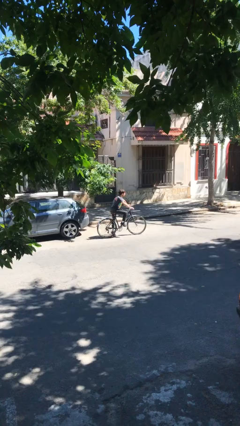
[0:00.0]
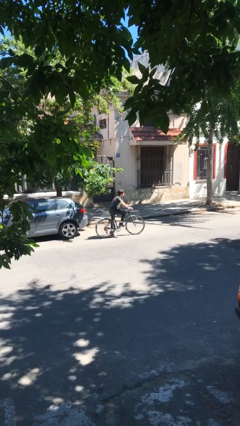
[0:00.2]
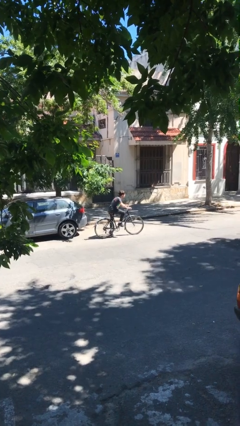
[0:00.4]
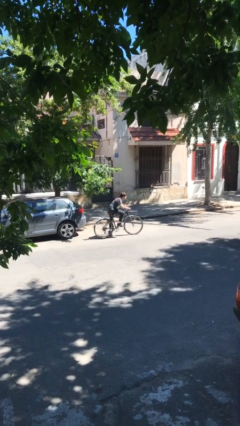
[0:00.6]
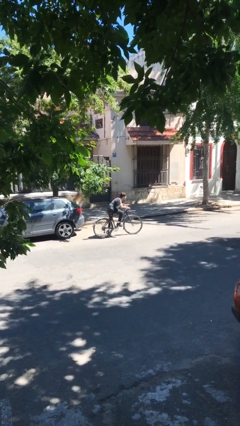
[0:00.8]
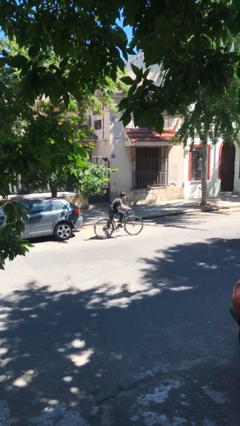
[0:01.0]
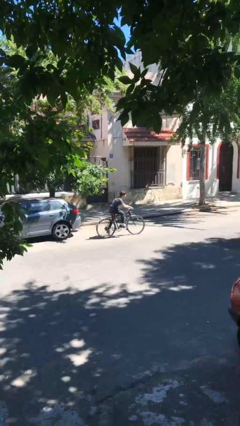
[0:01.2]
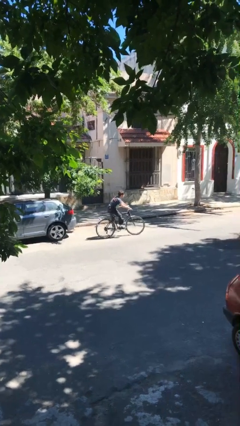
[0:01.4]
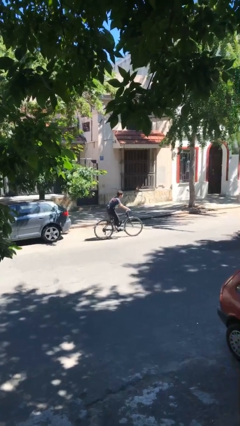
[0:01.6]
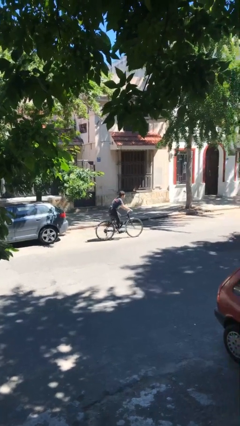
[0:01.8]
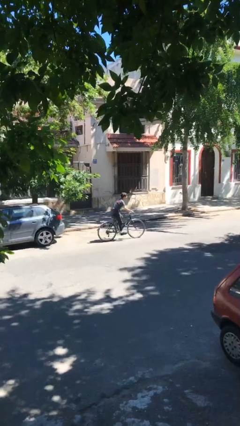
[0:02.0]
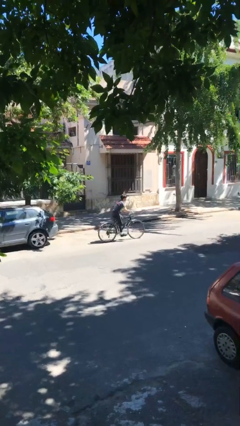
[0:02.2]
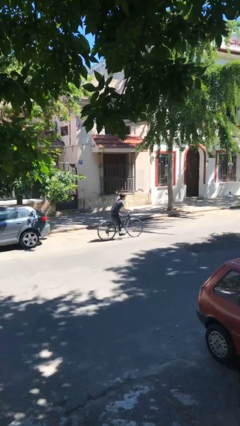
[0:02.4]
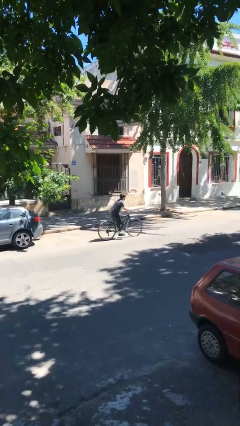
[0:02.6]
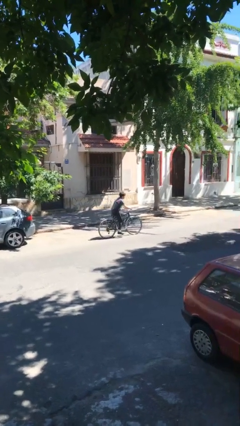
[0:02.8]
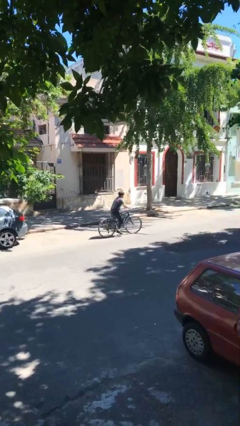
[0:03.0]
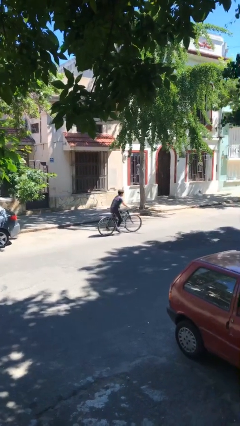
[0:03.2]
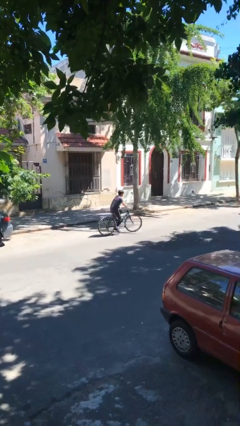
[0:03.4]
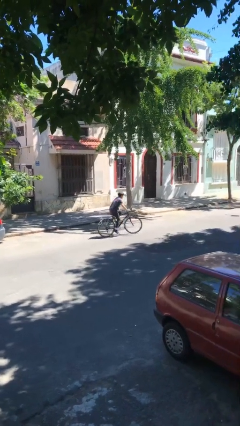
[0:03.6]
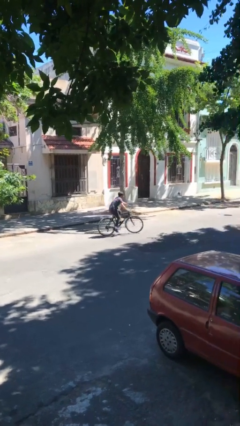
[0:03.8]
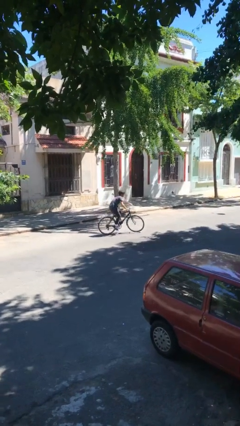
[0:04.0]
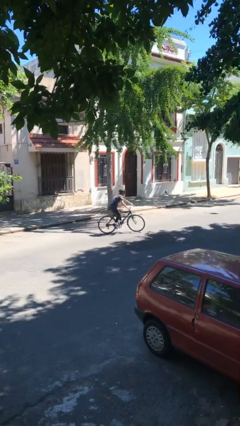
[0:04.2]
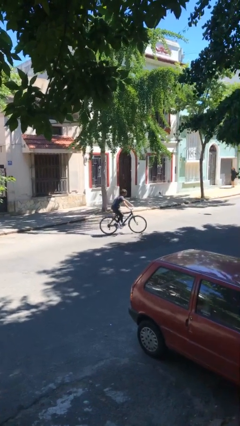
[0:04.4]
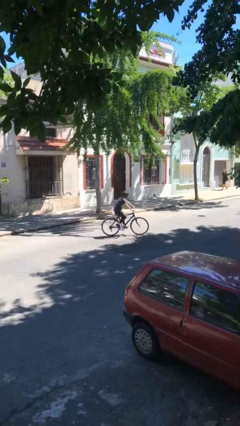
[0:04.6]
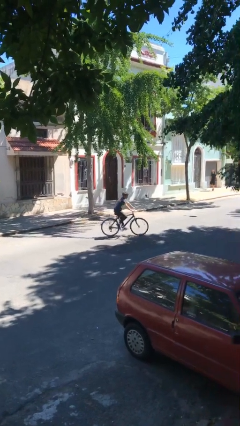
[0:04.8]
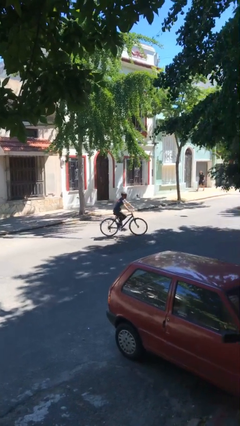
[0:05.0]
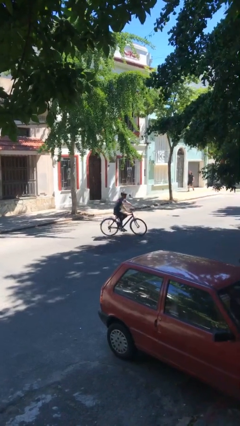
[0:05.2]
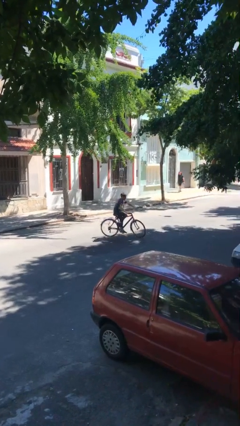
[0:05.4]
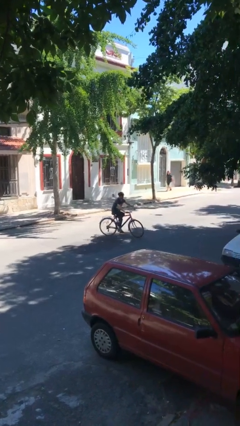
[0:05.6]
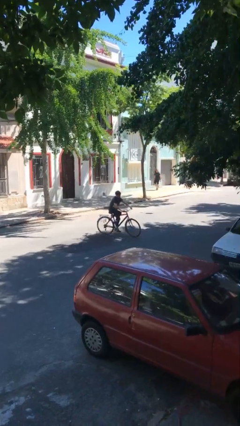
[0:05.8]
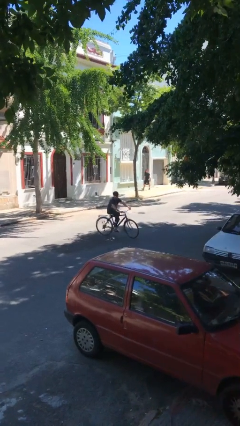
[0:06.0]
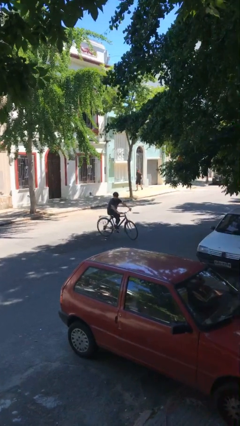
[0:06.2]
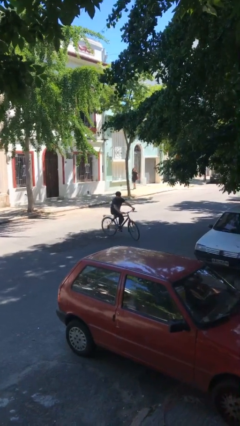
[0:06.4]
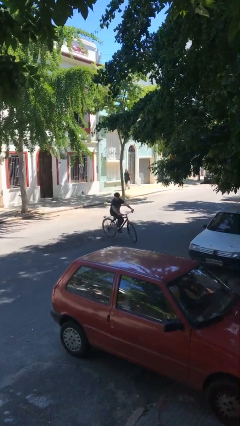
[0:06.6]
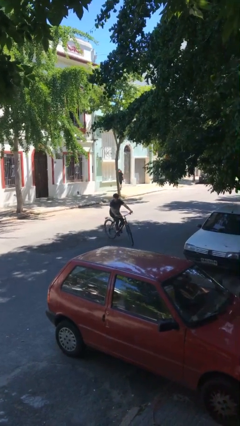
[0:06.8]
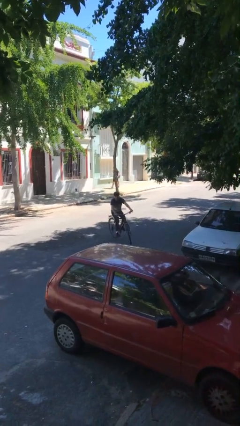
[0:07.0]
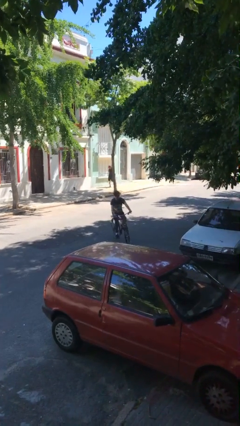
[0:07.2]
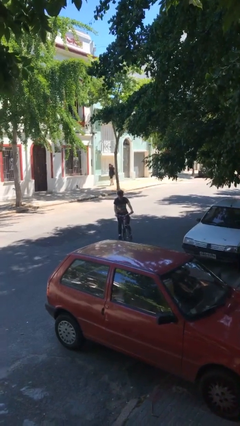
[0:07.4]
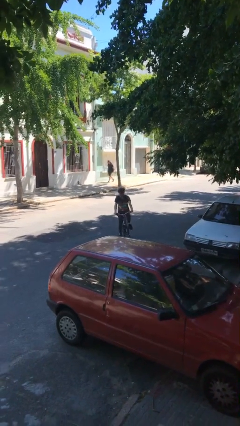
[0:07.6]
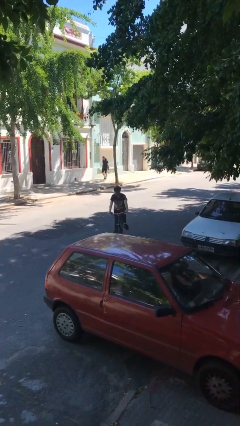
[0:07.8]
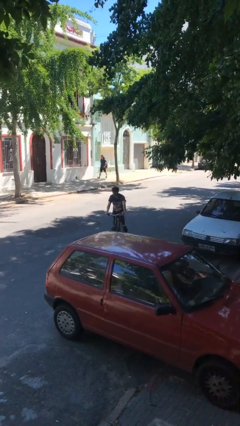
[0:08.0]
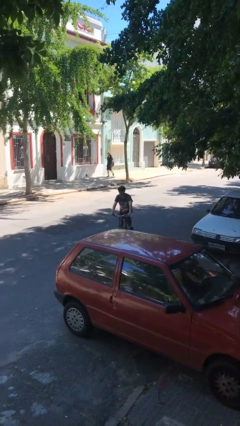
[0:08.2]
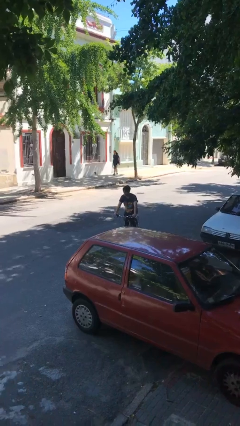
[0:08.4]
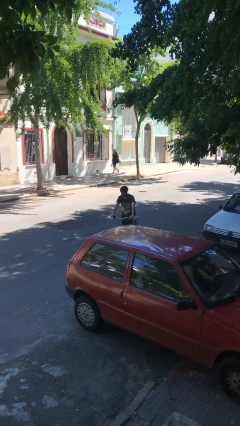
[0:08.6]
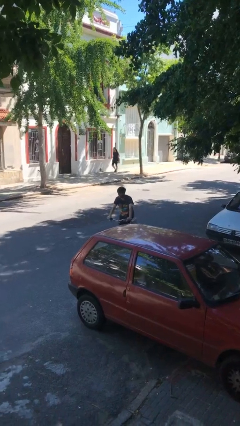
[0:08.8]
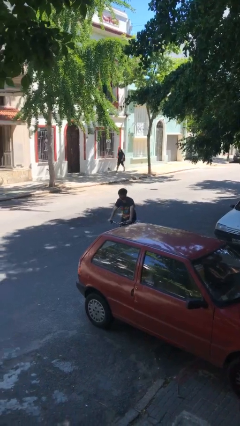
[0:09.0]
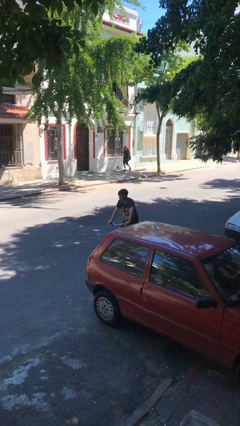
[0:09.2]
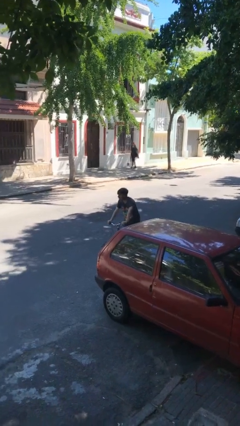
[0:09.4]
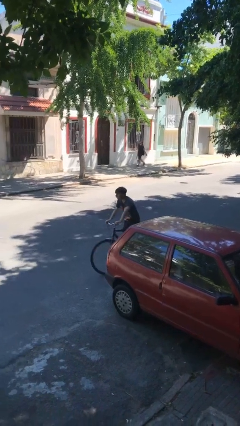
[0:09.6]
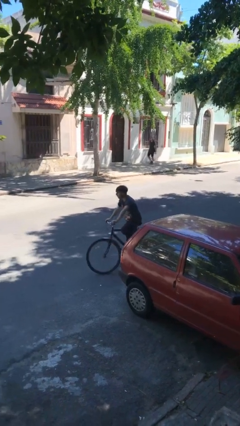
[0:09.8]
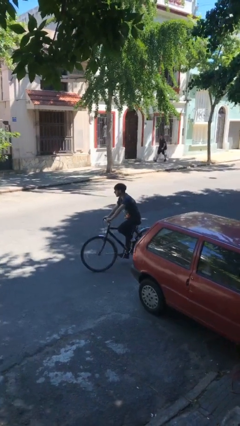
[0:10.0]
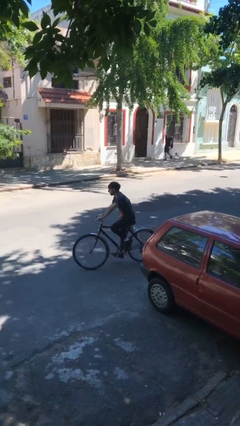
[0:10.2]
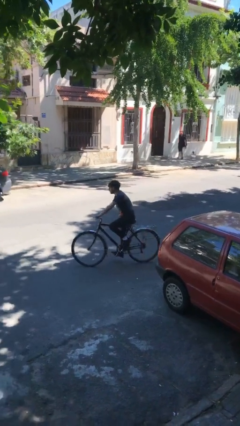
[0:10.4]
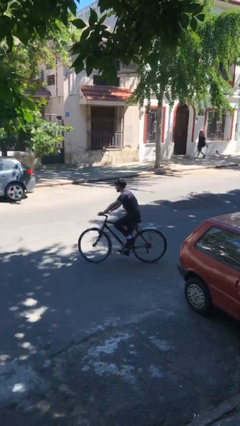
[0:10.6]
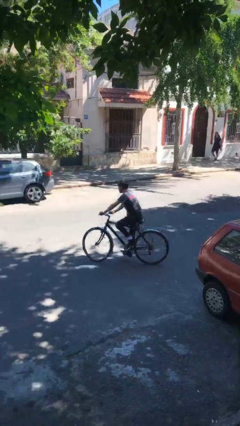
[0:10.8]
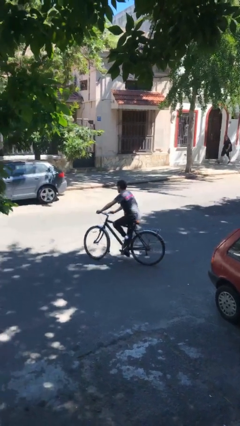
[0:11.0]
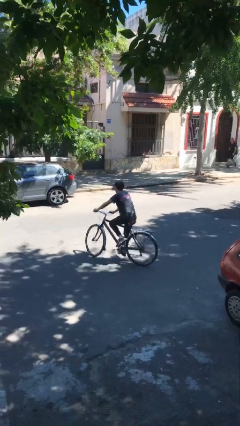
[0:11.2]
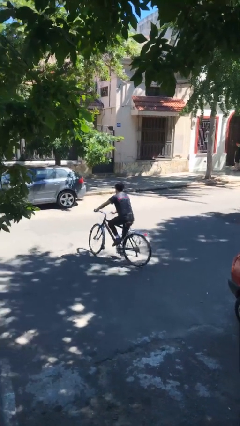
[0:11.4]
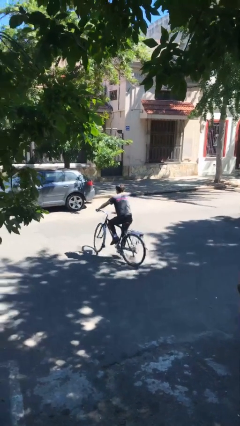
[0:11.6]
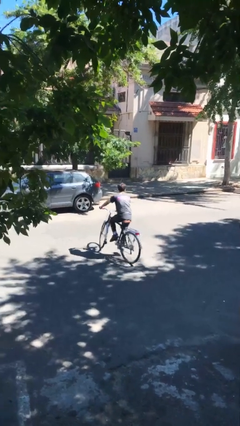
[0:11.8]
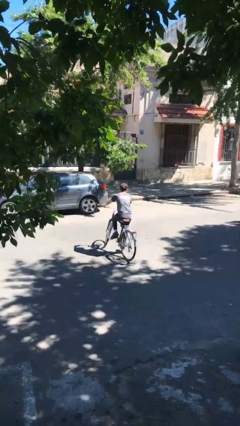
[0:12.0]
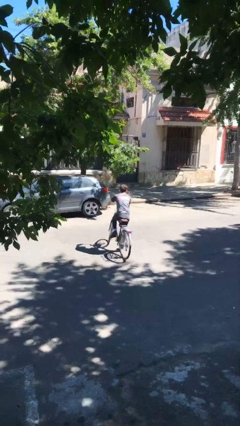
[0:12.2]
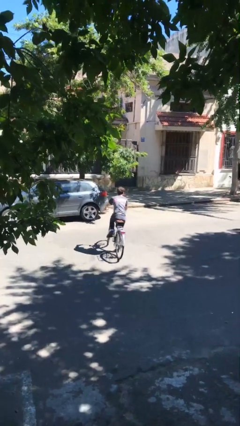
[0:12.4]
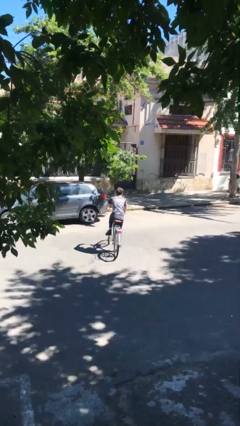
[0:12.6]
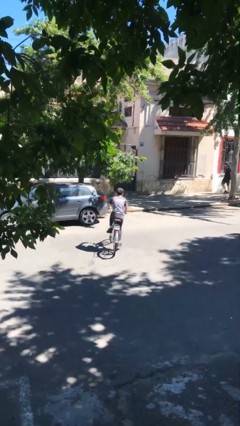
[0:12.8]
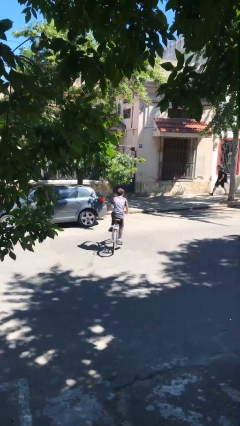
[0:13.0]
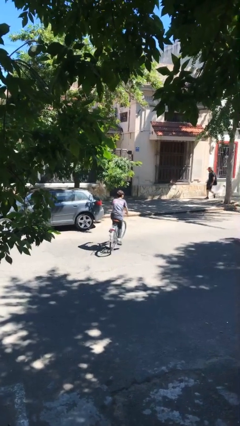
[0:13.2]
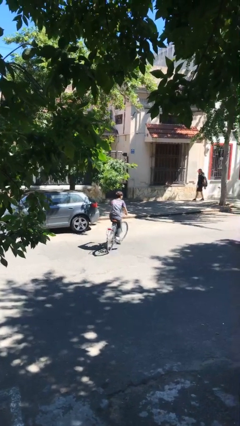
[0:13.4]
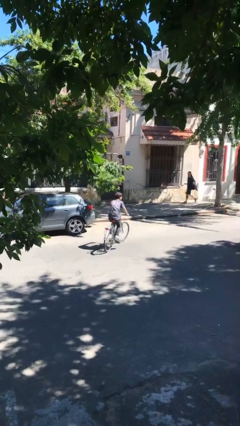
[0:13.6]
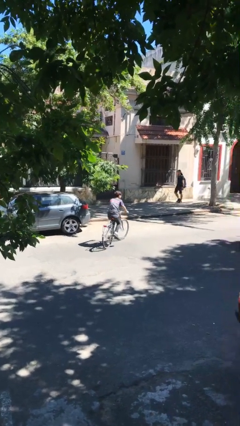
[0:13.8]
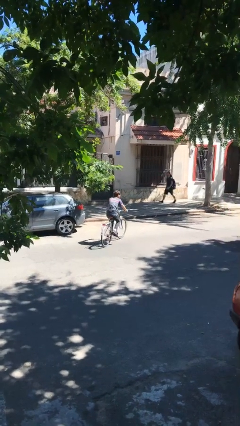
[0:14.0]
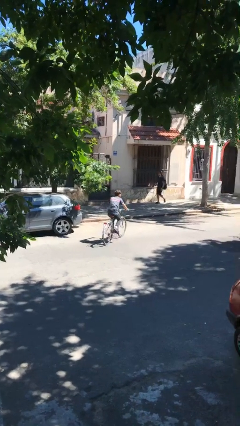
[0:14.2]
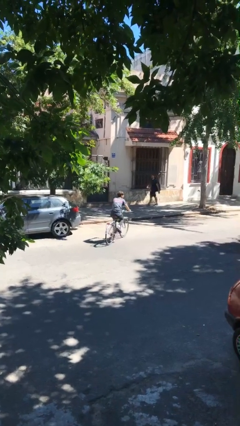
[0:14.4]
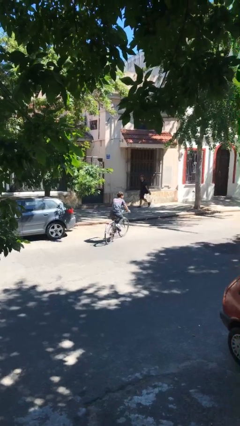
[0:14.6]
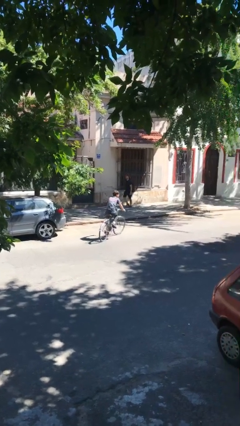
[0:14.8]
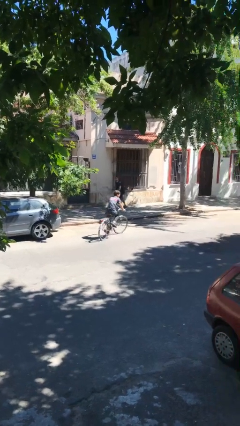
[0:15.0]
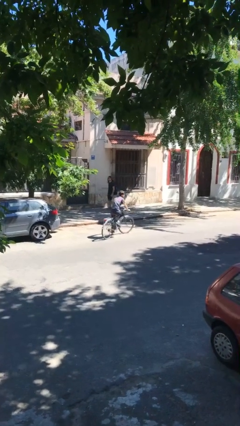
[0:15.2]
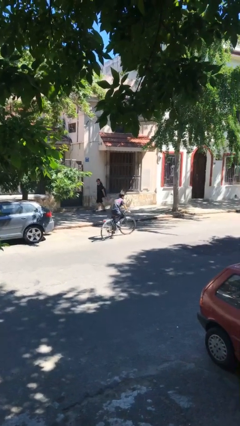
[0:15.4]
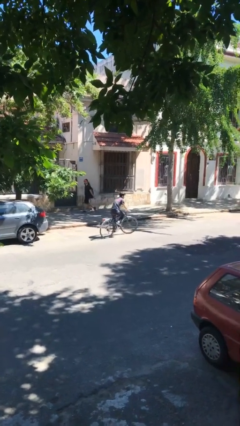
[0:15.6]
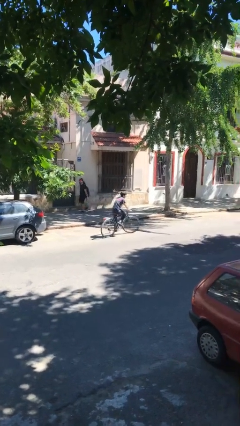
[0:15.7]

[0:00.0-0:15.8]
person rides bicycle

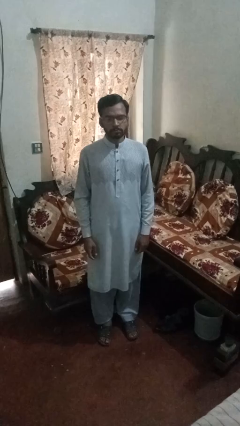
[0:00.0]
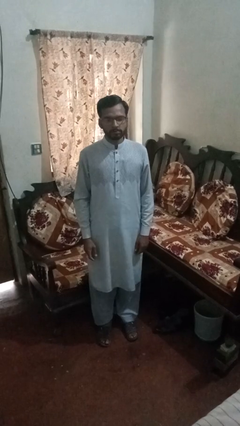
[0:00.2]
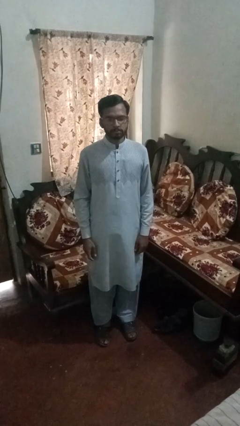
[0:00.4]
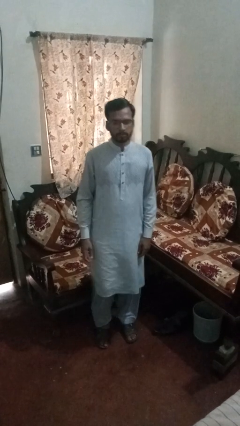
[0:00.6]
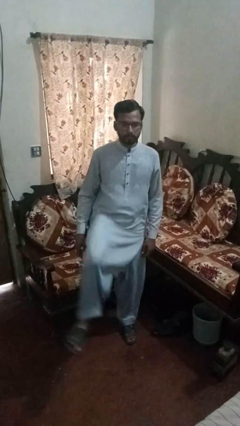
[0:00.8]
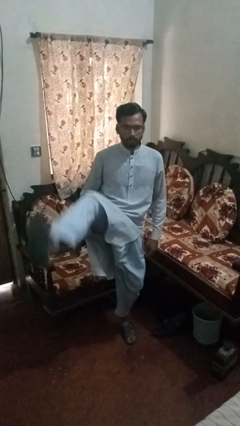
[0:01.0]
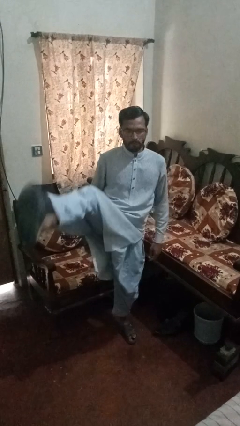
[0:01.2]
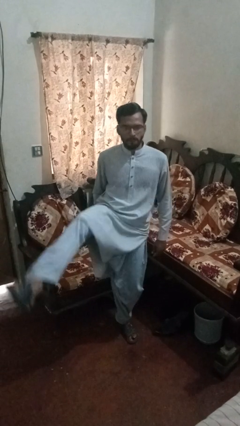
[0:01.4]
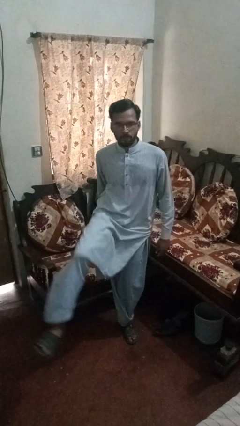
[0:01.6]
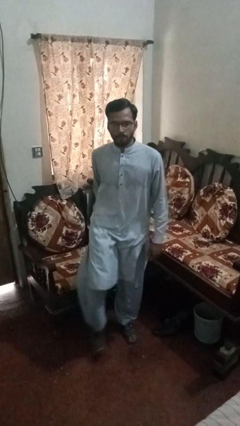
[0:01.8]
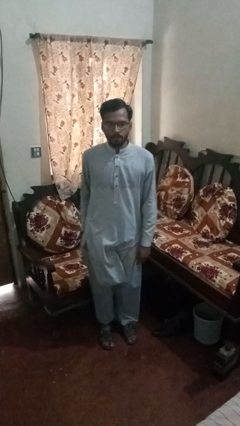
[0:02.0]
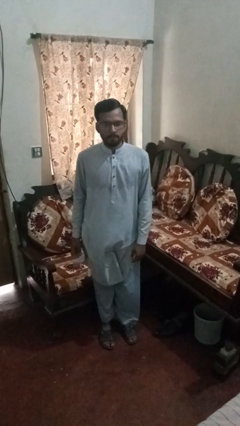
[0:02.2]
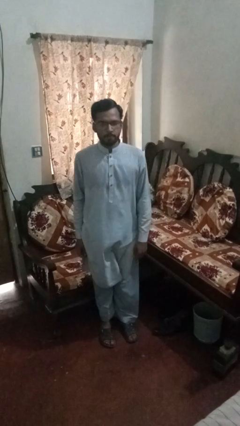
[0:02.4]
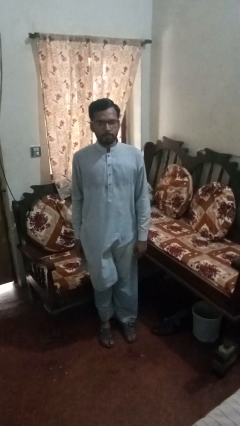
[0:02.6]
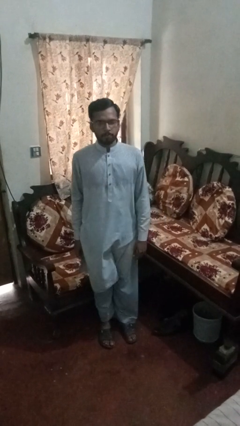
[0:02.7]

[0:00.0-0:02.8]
person karate kicks
